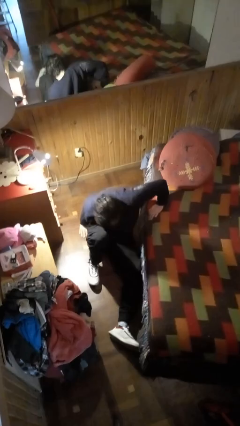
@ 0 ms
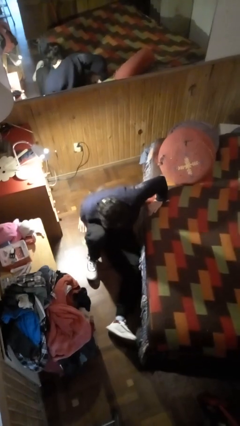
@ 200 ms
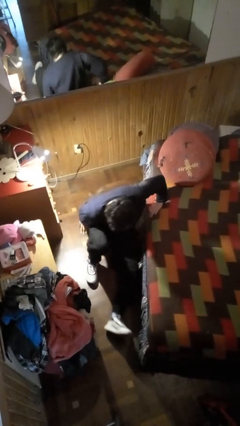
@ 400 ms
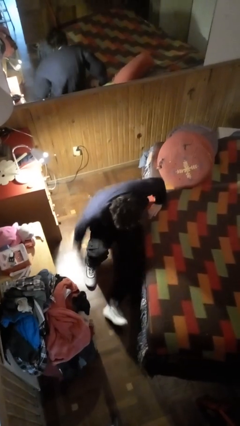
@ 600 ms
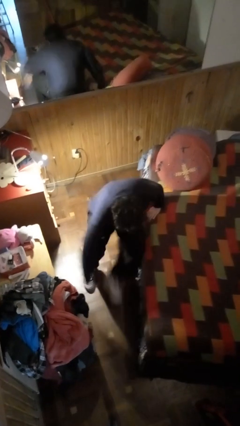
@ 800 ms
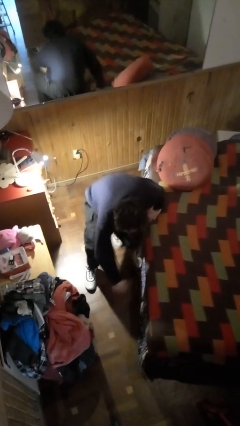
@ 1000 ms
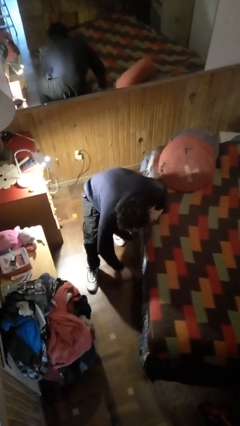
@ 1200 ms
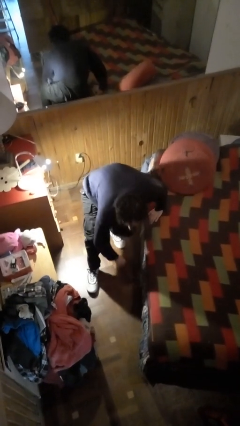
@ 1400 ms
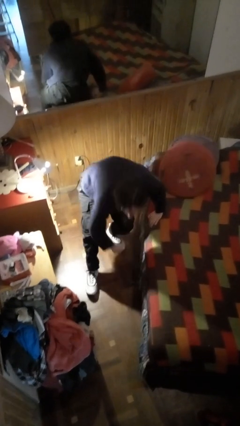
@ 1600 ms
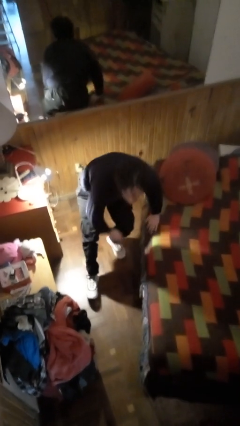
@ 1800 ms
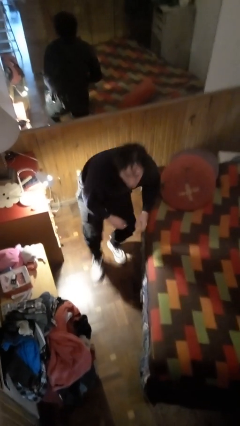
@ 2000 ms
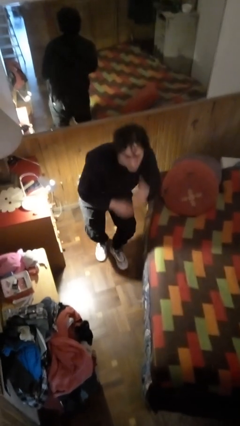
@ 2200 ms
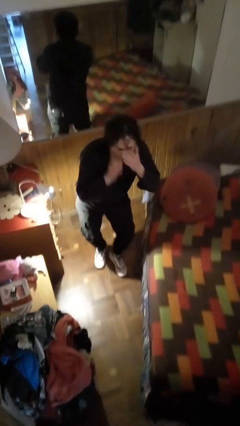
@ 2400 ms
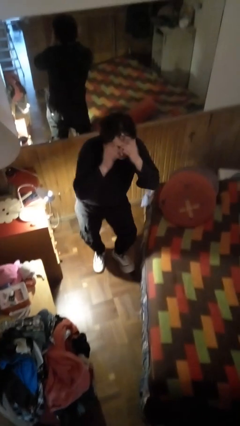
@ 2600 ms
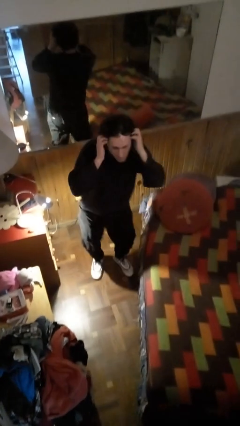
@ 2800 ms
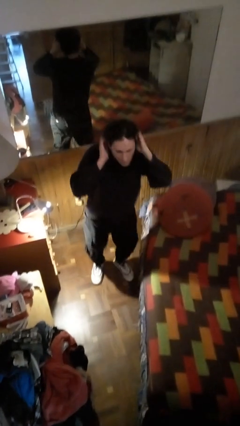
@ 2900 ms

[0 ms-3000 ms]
person stands up from floor

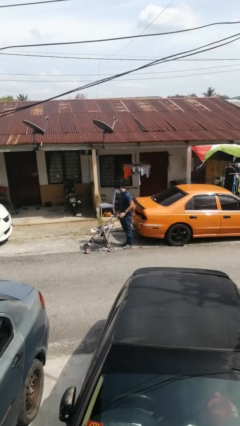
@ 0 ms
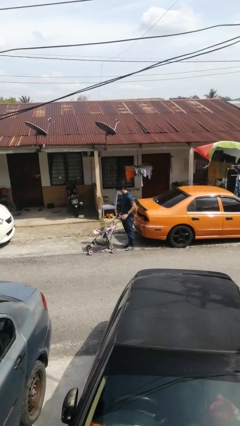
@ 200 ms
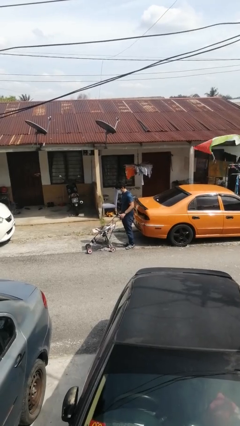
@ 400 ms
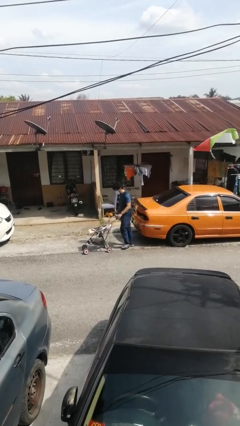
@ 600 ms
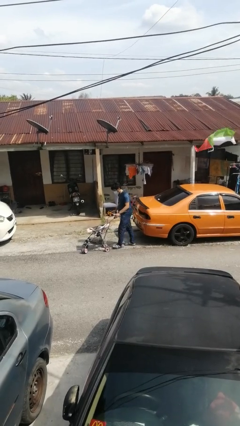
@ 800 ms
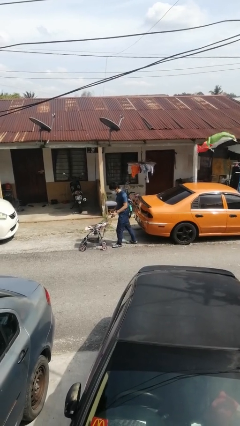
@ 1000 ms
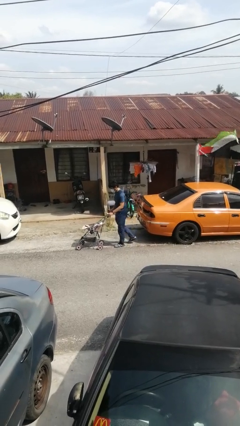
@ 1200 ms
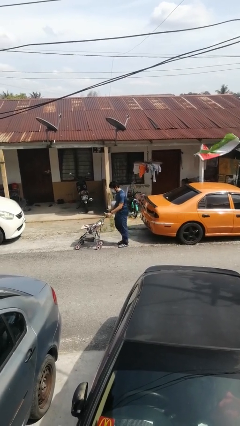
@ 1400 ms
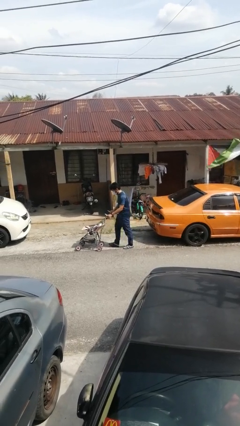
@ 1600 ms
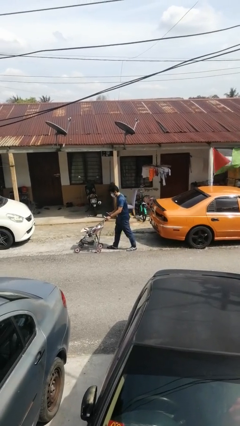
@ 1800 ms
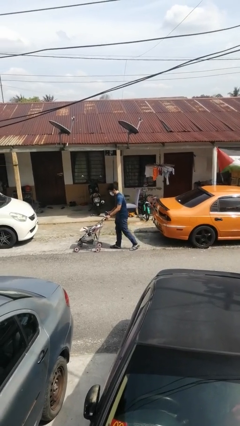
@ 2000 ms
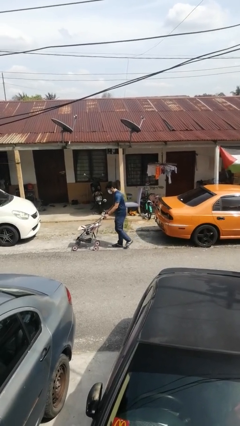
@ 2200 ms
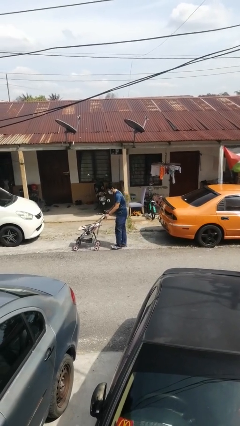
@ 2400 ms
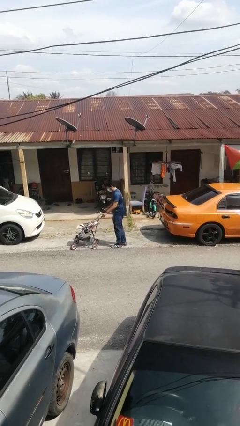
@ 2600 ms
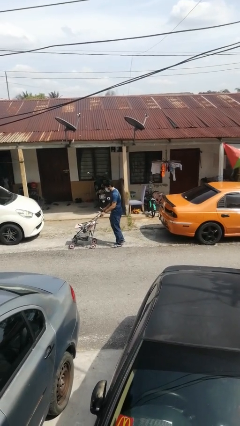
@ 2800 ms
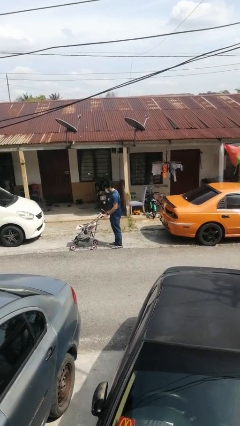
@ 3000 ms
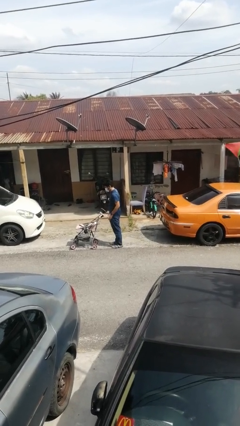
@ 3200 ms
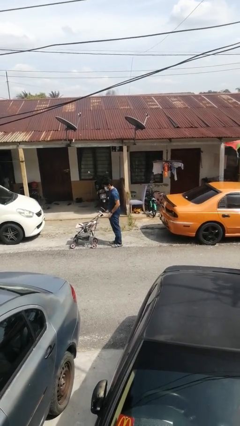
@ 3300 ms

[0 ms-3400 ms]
person pushes wheeled cart

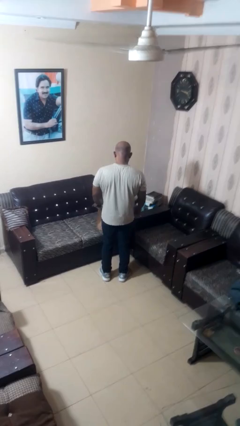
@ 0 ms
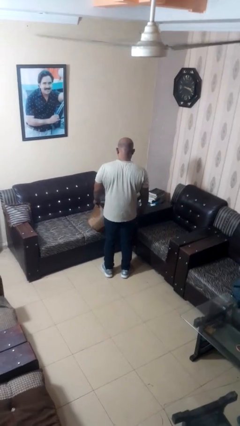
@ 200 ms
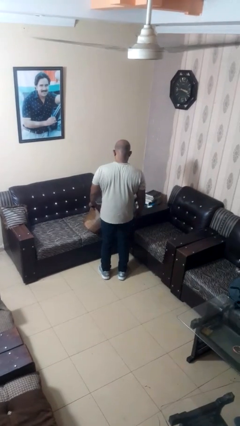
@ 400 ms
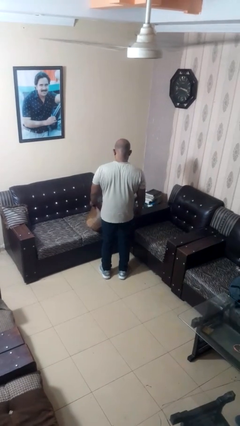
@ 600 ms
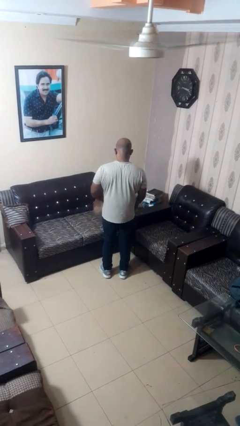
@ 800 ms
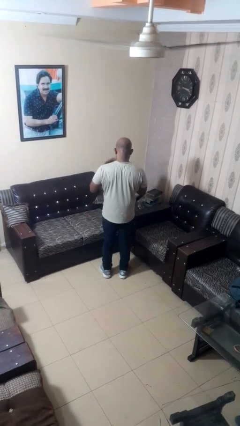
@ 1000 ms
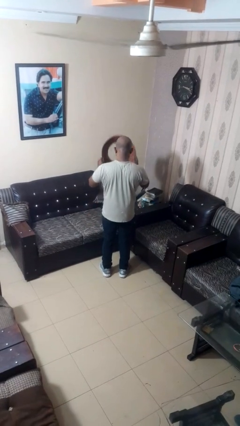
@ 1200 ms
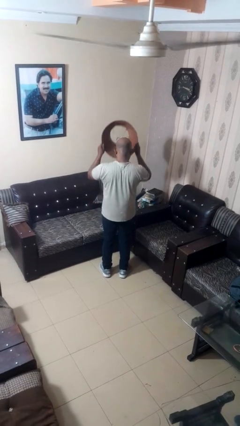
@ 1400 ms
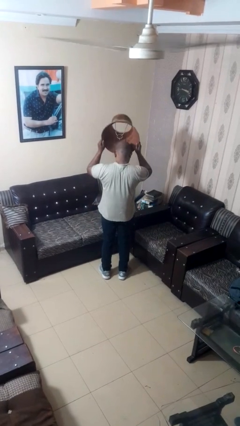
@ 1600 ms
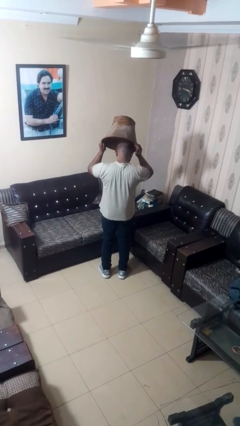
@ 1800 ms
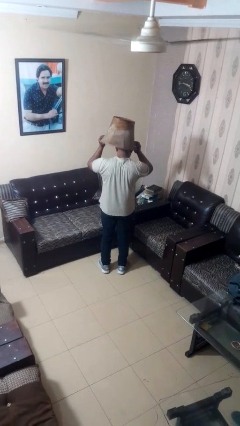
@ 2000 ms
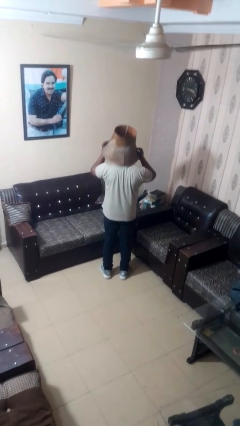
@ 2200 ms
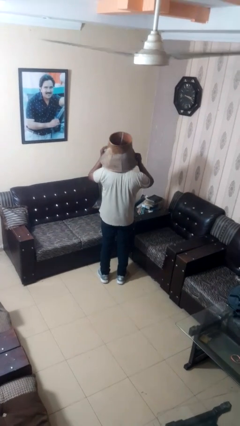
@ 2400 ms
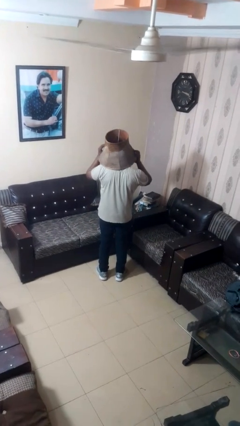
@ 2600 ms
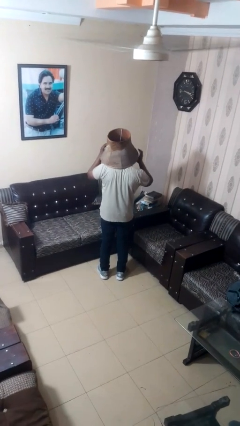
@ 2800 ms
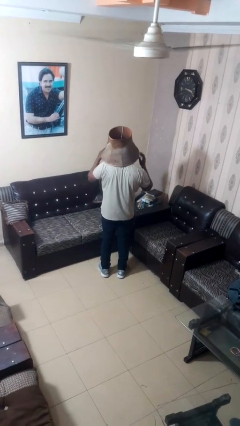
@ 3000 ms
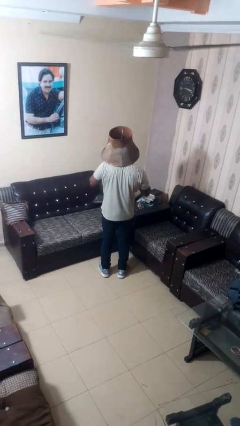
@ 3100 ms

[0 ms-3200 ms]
person puts on hat

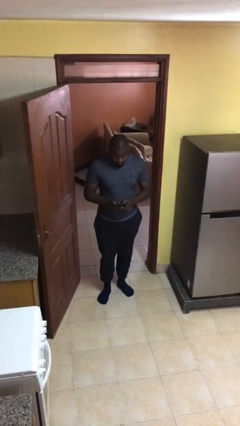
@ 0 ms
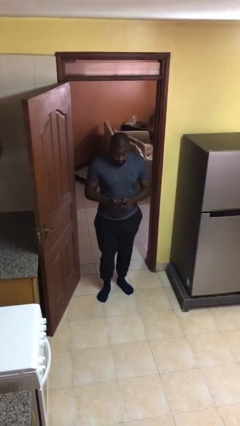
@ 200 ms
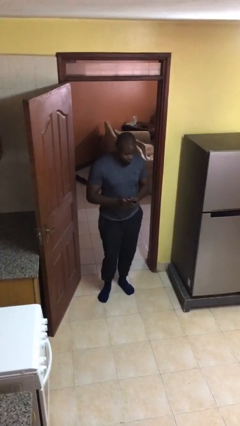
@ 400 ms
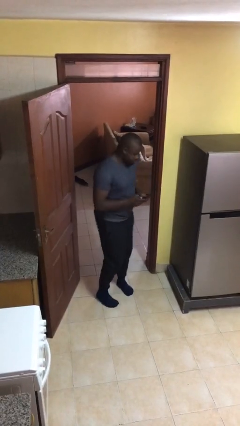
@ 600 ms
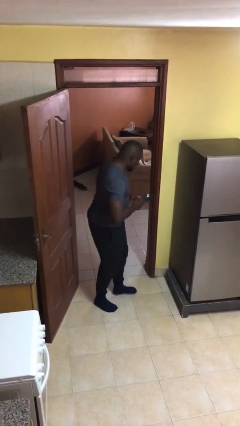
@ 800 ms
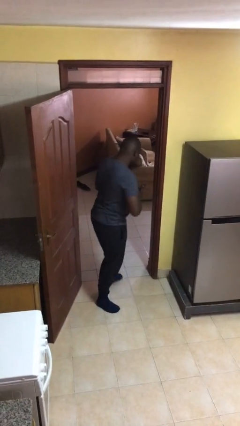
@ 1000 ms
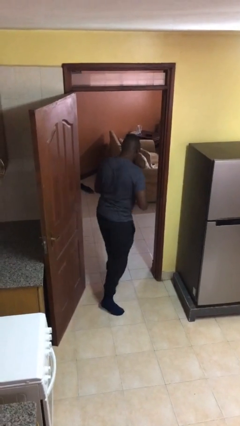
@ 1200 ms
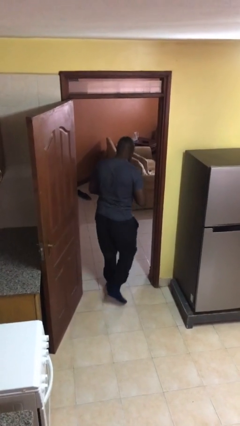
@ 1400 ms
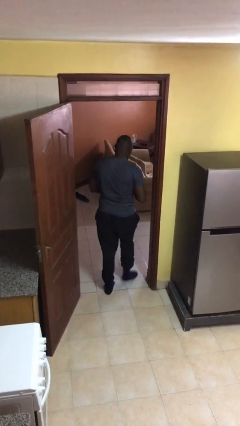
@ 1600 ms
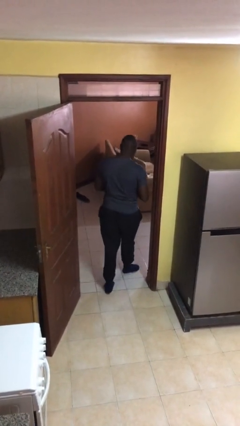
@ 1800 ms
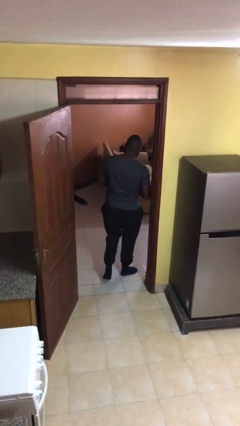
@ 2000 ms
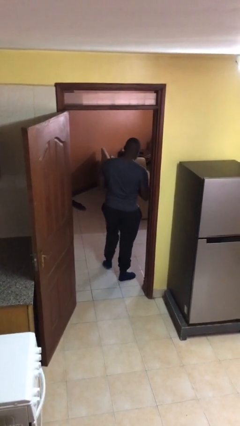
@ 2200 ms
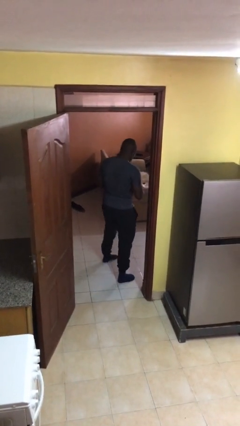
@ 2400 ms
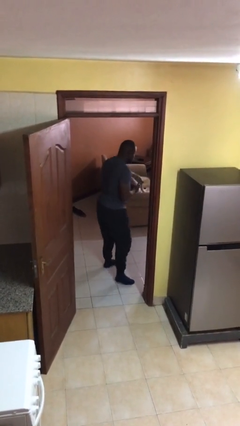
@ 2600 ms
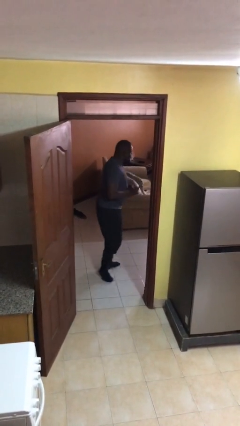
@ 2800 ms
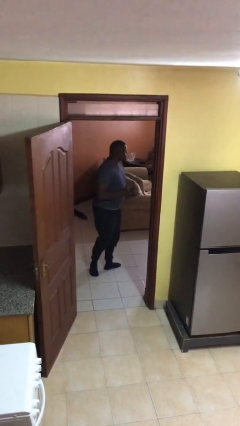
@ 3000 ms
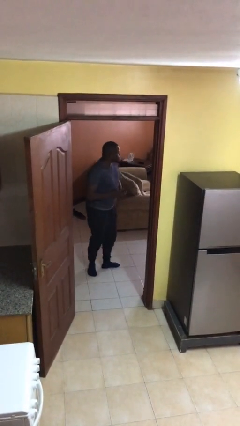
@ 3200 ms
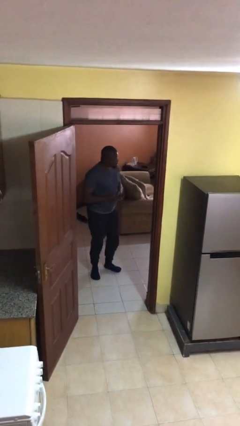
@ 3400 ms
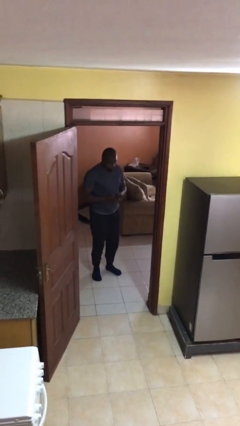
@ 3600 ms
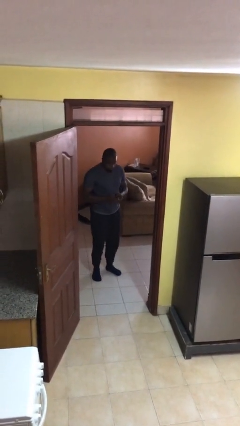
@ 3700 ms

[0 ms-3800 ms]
person exits scene through structure

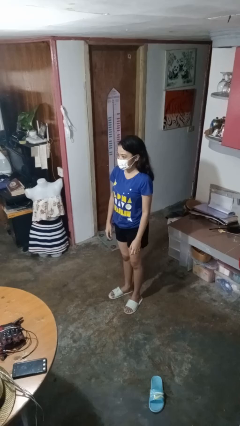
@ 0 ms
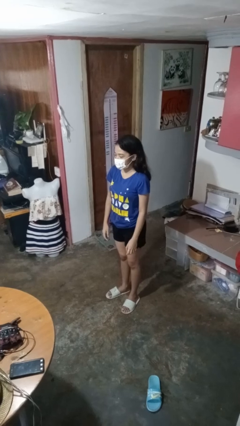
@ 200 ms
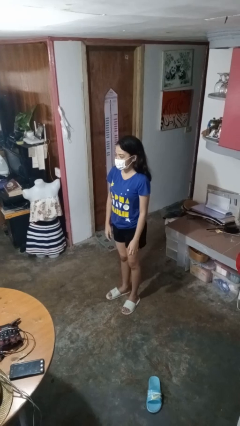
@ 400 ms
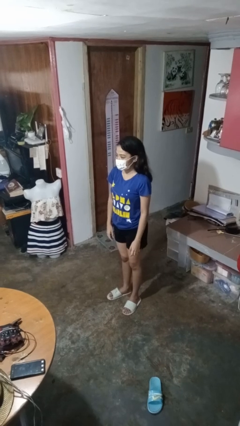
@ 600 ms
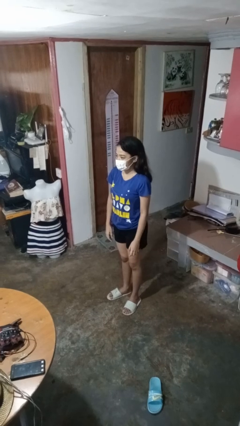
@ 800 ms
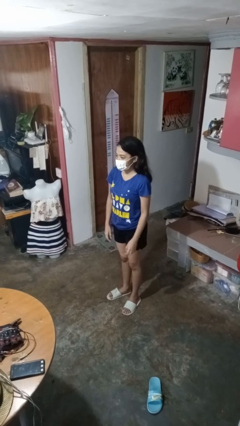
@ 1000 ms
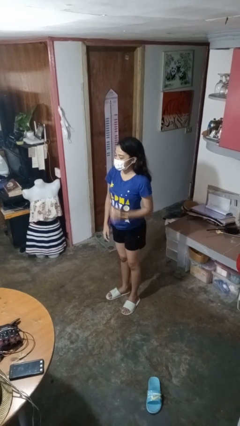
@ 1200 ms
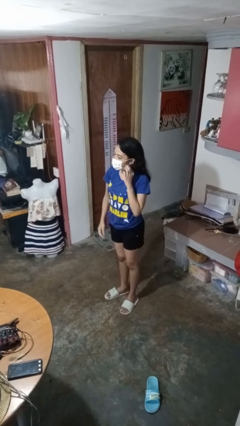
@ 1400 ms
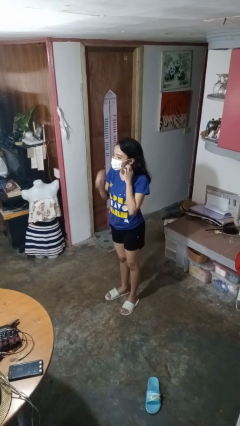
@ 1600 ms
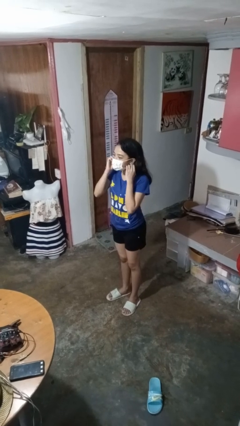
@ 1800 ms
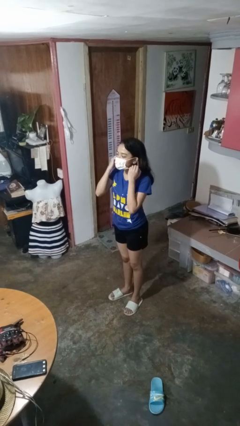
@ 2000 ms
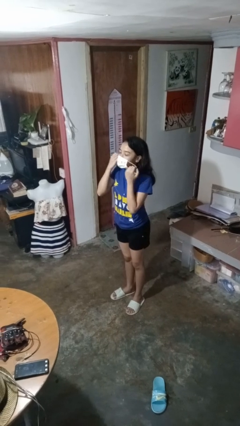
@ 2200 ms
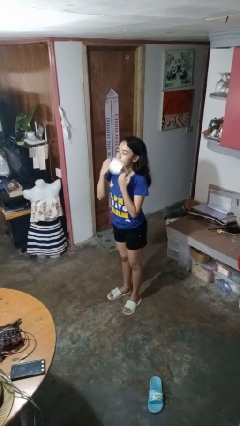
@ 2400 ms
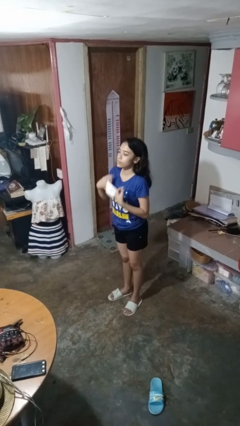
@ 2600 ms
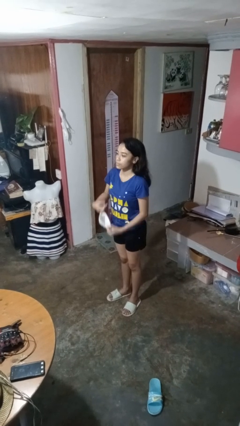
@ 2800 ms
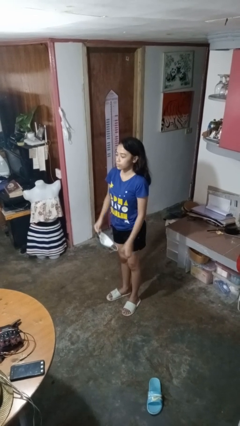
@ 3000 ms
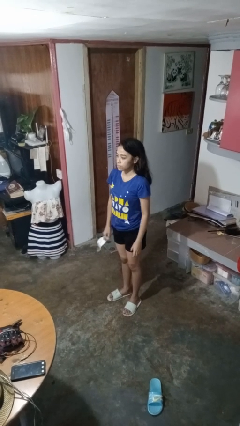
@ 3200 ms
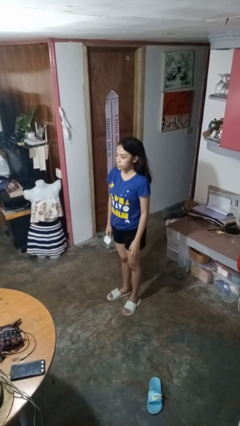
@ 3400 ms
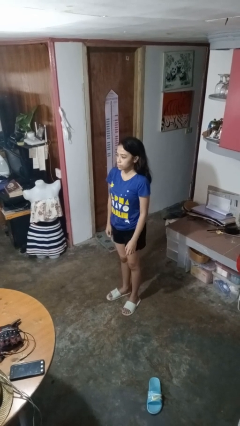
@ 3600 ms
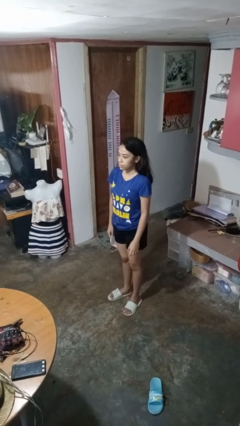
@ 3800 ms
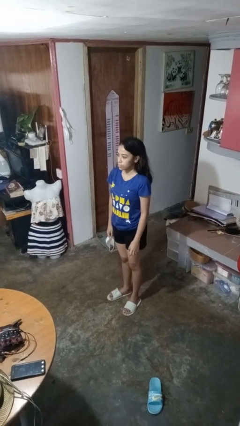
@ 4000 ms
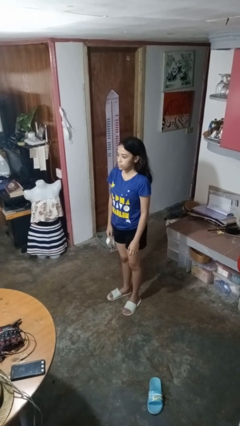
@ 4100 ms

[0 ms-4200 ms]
person takes off facemask
